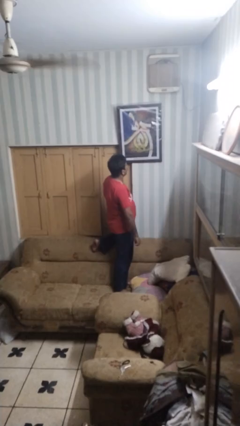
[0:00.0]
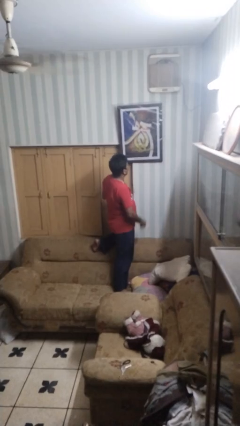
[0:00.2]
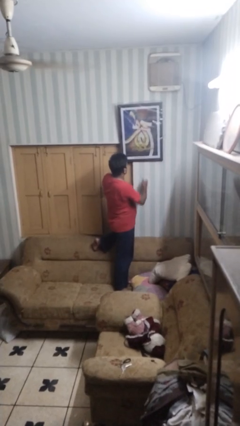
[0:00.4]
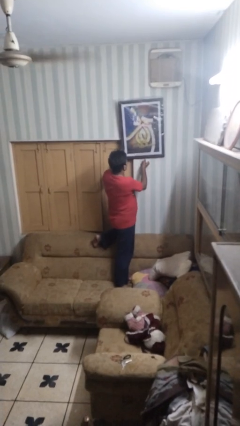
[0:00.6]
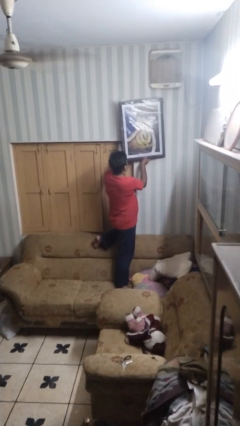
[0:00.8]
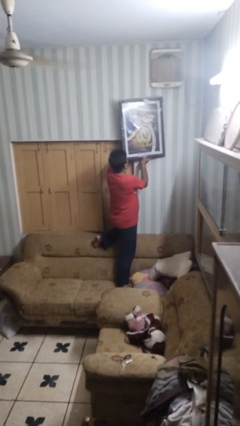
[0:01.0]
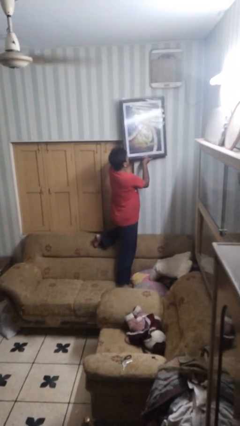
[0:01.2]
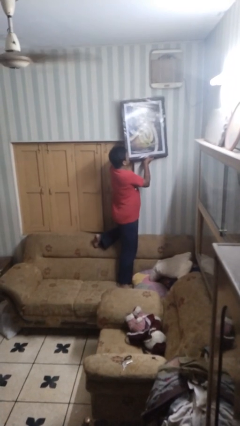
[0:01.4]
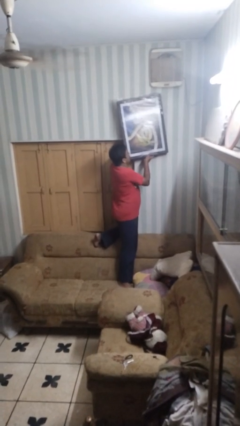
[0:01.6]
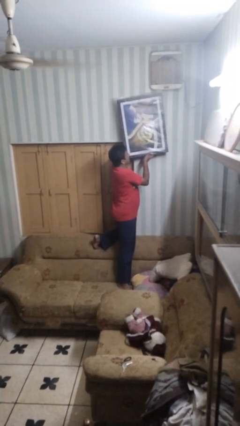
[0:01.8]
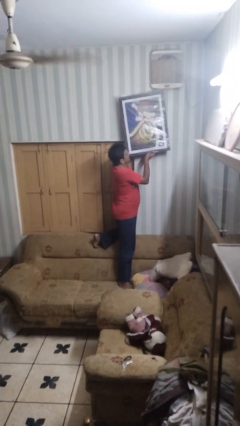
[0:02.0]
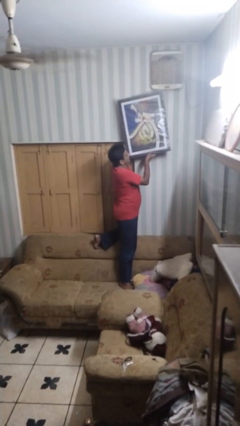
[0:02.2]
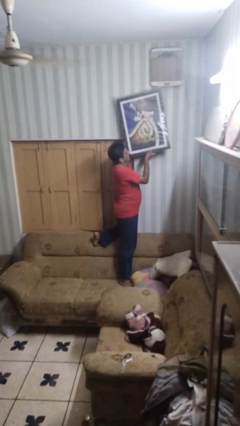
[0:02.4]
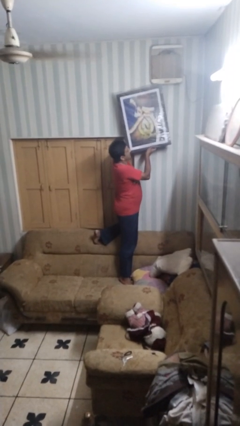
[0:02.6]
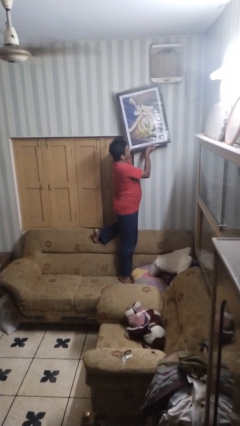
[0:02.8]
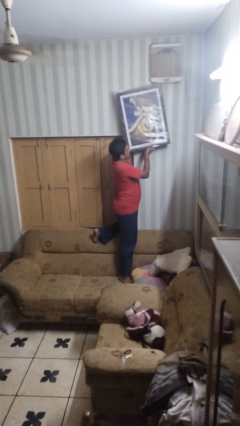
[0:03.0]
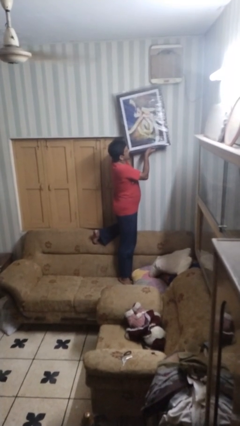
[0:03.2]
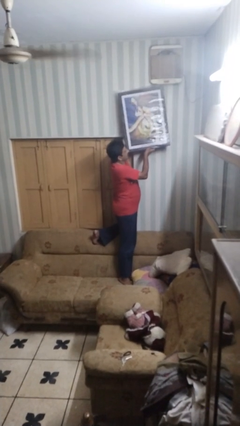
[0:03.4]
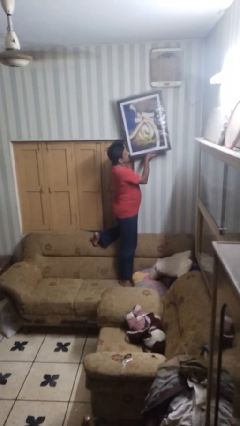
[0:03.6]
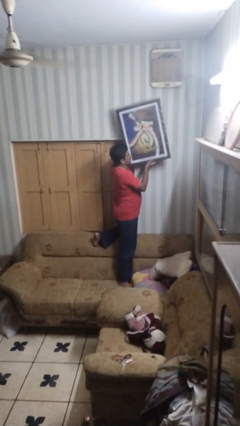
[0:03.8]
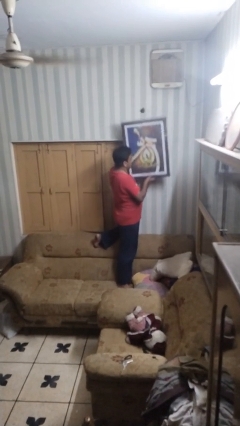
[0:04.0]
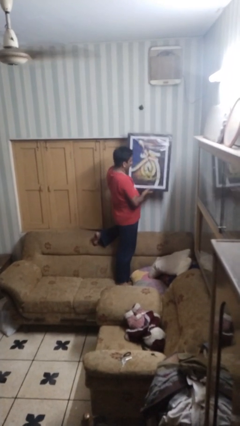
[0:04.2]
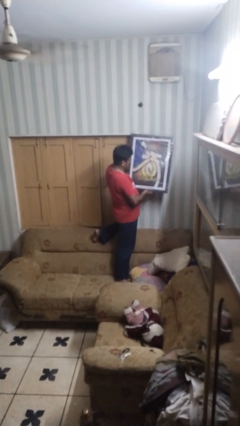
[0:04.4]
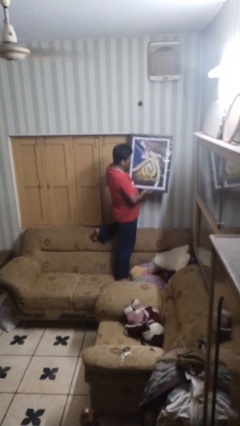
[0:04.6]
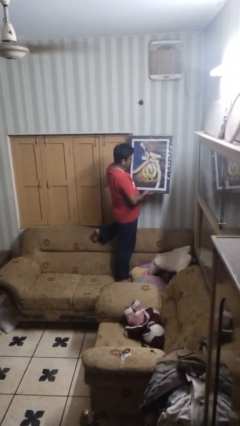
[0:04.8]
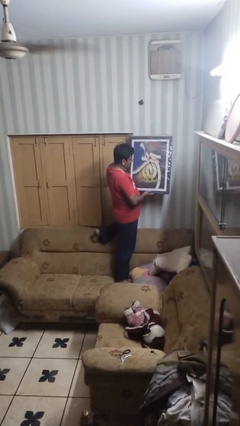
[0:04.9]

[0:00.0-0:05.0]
person takes down picture frame

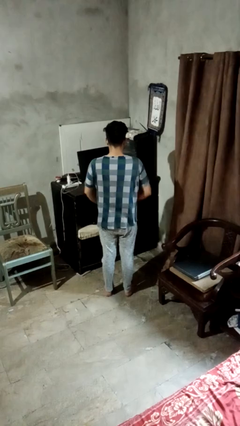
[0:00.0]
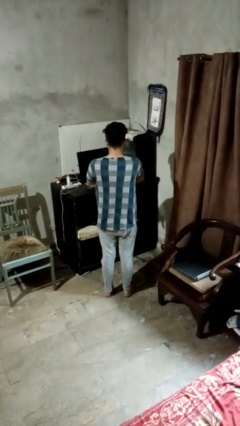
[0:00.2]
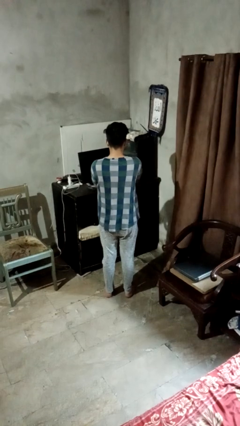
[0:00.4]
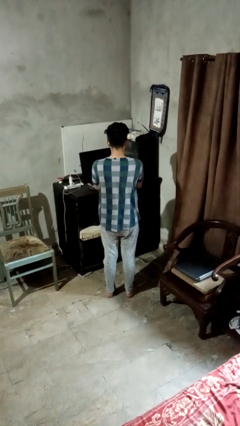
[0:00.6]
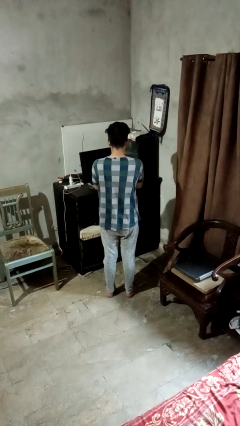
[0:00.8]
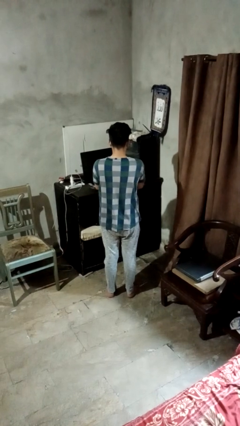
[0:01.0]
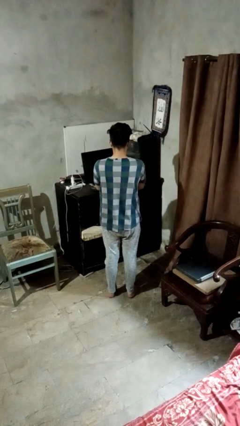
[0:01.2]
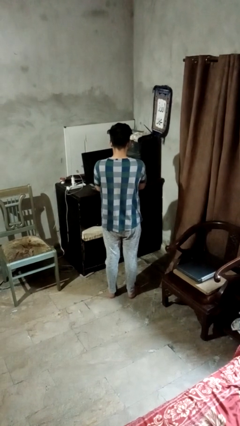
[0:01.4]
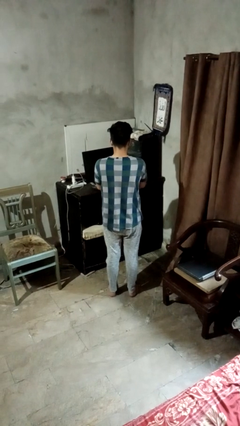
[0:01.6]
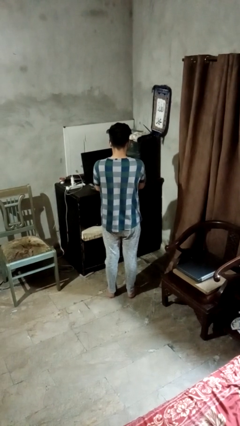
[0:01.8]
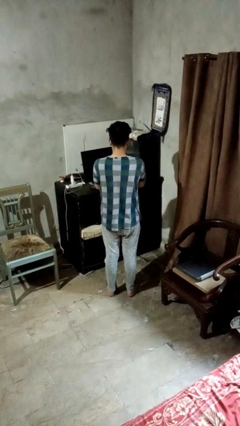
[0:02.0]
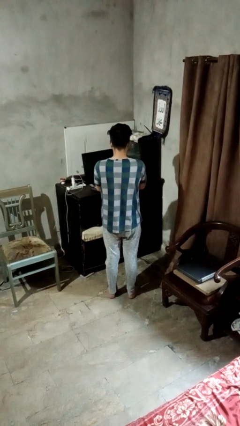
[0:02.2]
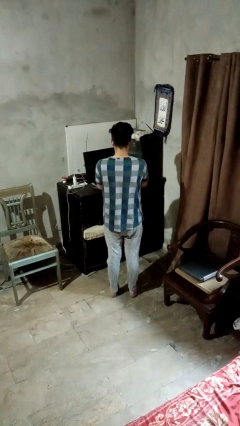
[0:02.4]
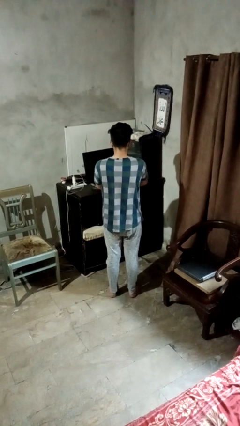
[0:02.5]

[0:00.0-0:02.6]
person crosses arms

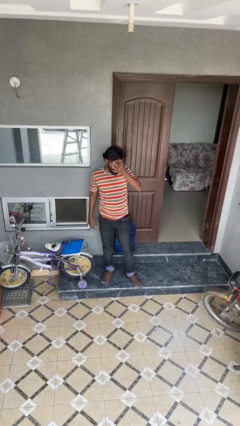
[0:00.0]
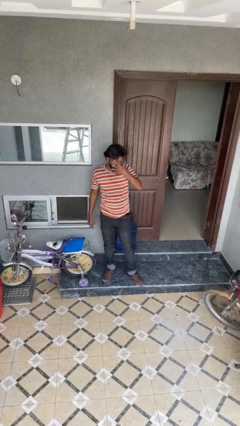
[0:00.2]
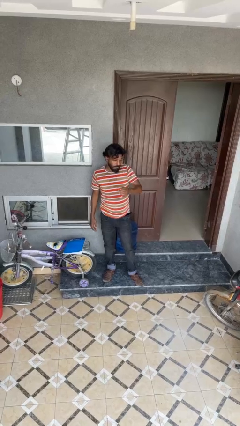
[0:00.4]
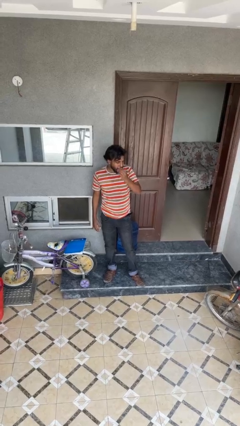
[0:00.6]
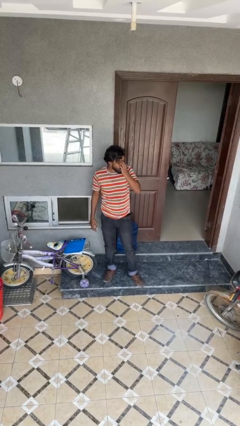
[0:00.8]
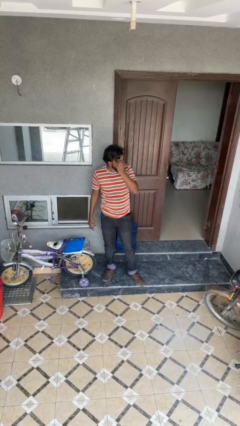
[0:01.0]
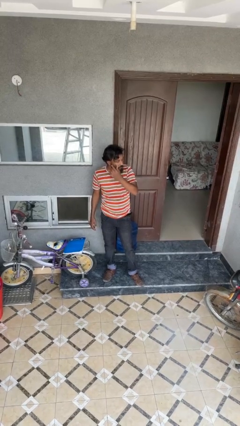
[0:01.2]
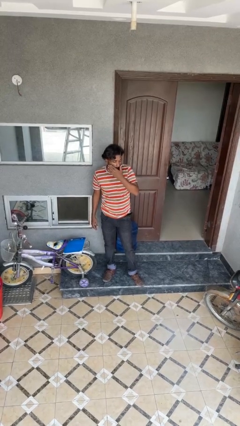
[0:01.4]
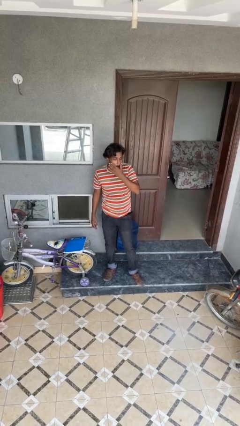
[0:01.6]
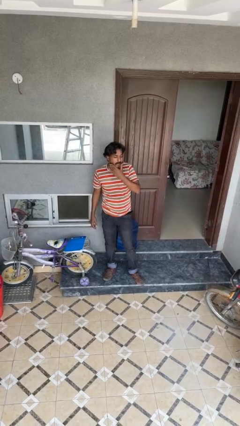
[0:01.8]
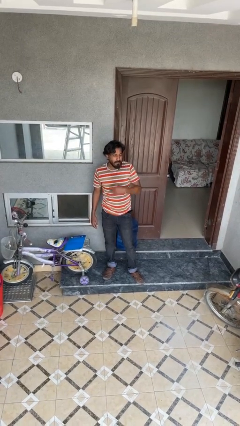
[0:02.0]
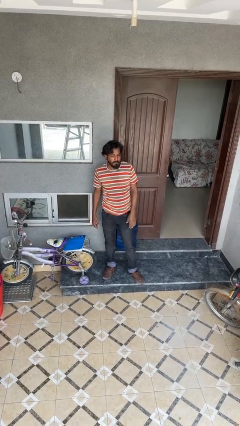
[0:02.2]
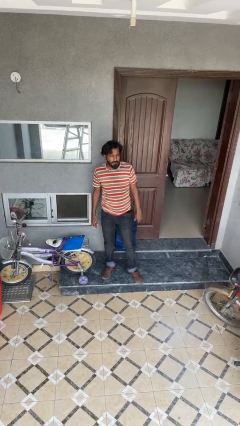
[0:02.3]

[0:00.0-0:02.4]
person scratches face

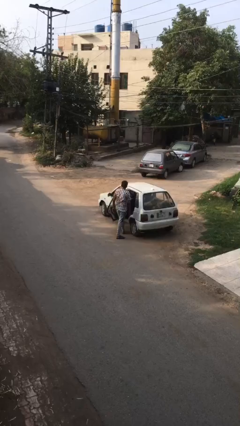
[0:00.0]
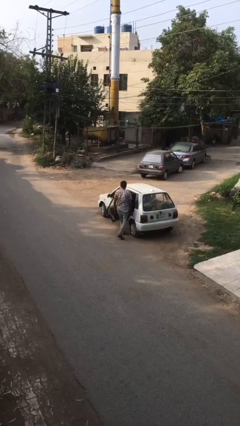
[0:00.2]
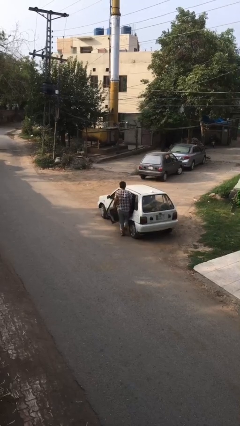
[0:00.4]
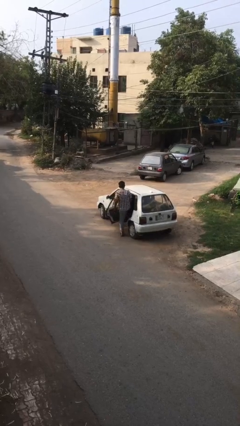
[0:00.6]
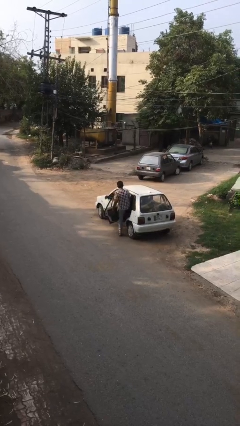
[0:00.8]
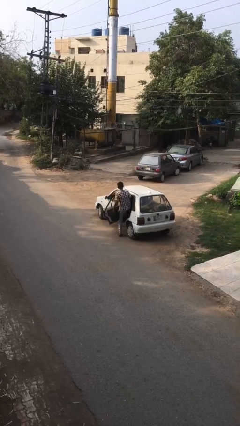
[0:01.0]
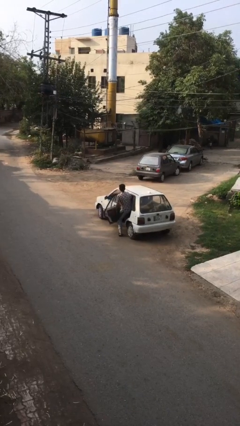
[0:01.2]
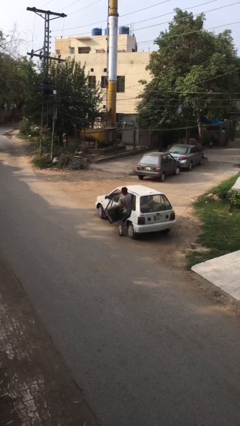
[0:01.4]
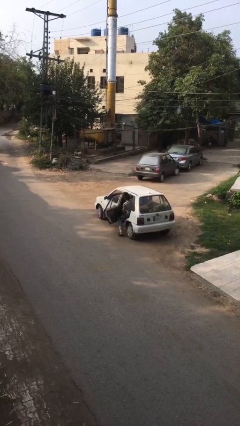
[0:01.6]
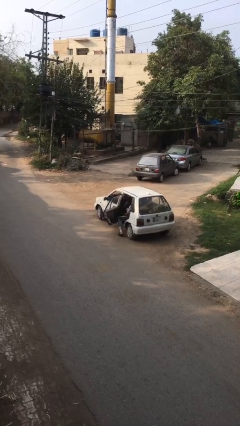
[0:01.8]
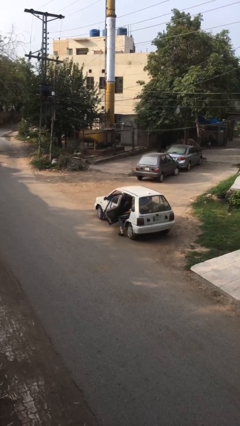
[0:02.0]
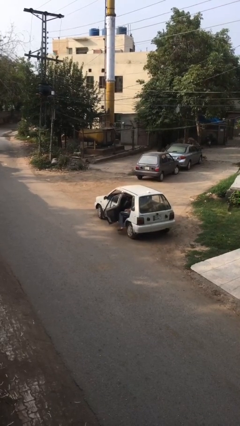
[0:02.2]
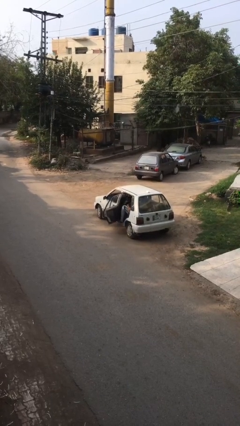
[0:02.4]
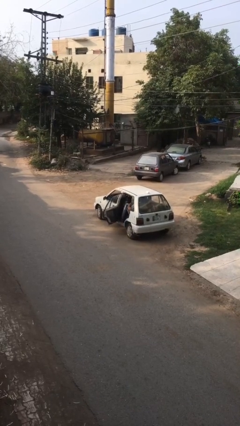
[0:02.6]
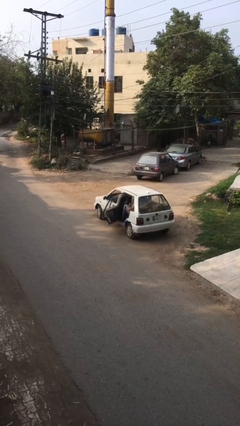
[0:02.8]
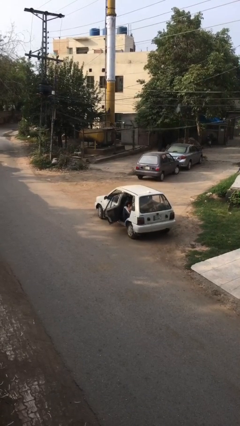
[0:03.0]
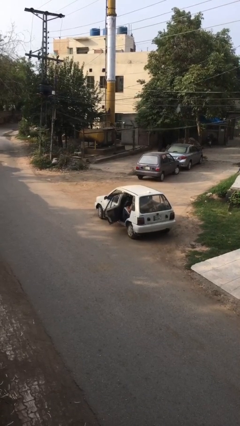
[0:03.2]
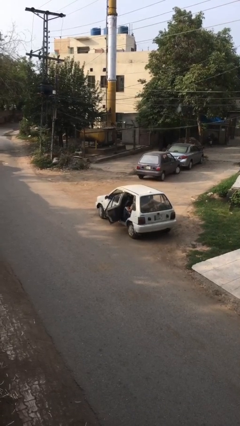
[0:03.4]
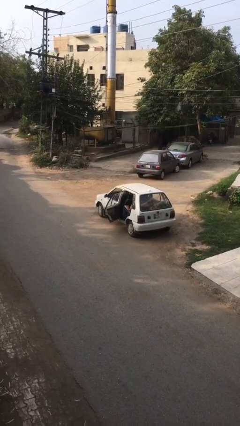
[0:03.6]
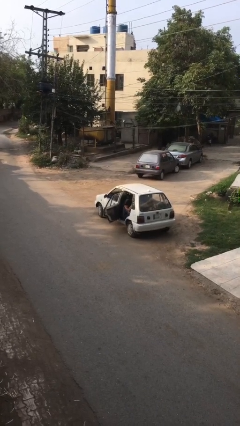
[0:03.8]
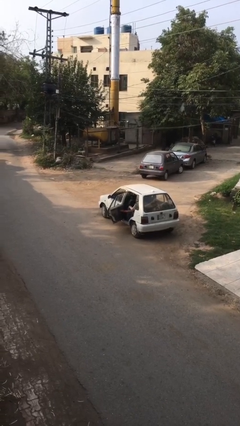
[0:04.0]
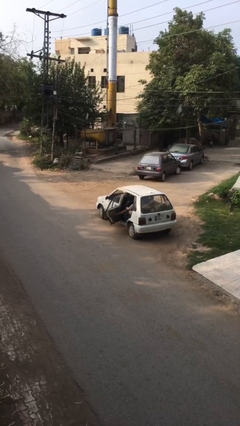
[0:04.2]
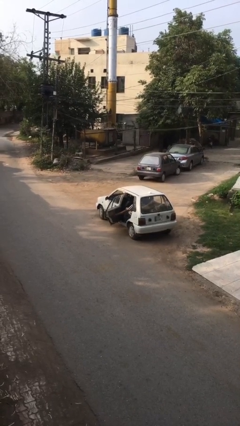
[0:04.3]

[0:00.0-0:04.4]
person enters car

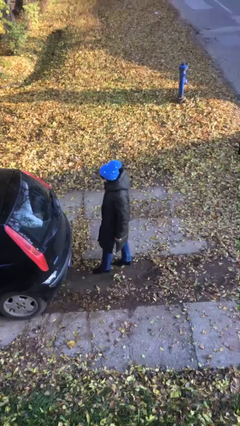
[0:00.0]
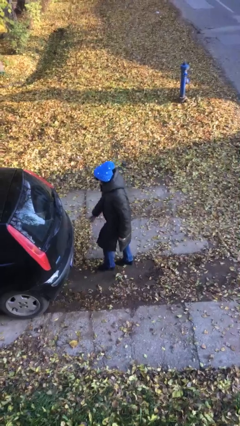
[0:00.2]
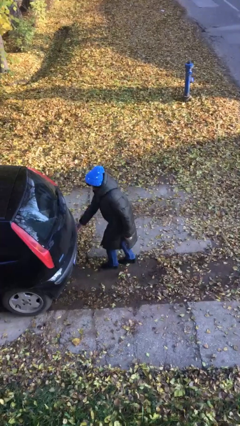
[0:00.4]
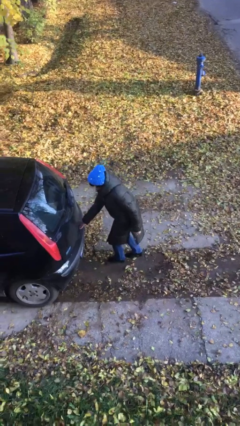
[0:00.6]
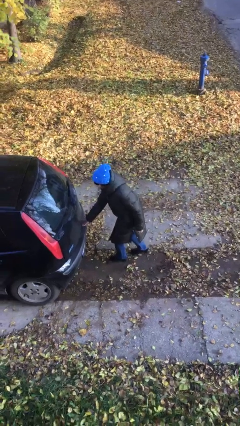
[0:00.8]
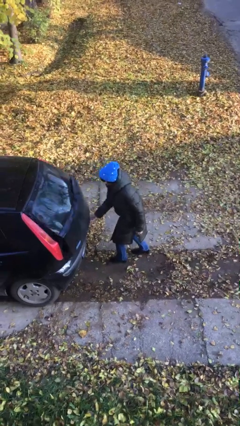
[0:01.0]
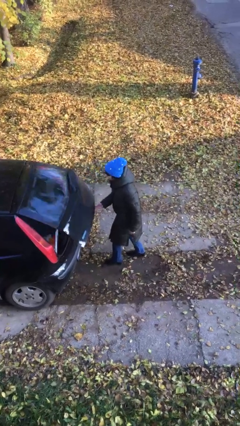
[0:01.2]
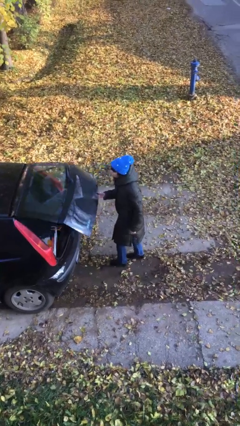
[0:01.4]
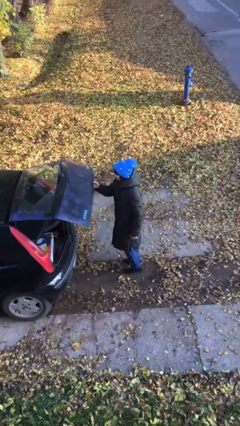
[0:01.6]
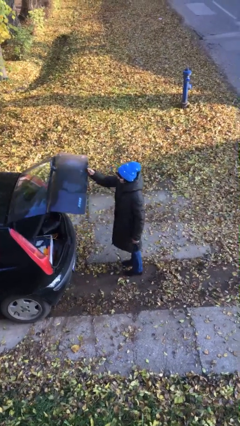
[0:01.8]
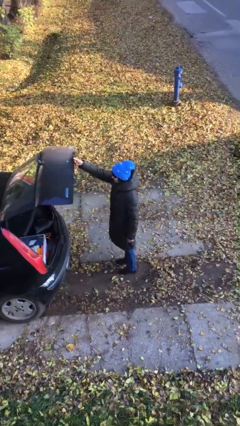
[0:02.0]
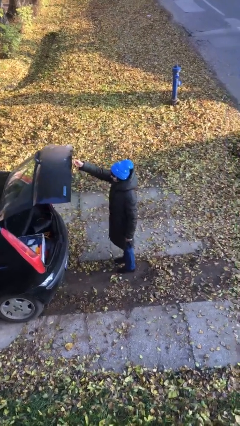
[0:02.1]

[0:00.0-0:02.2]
person opens car trunk

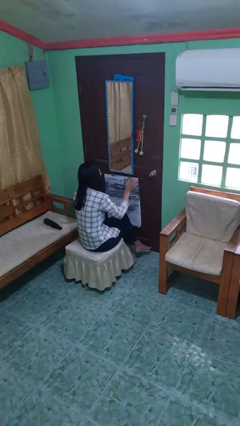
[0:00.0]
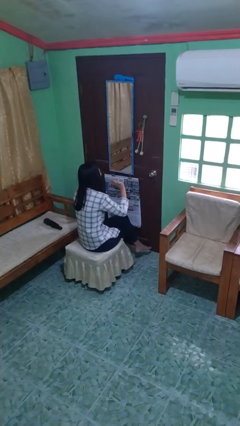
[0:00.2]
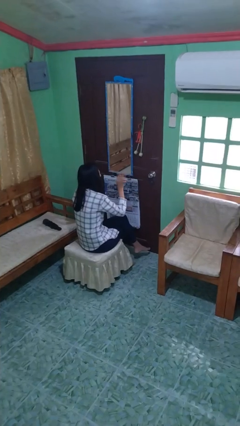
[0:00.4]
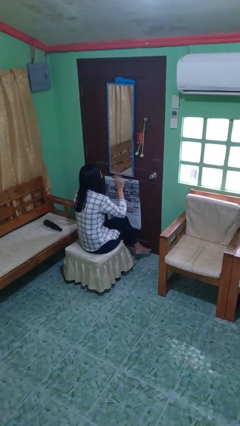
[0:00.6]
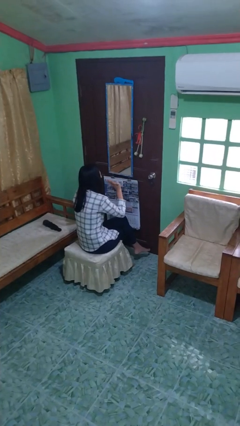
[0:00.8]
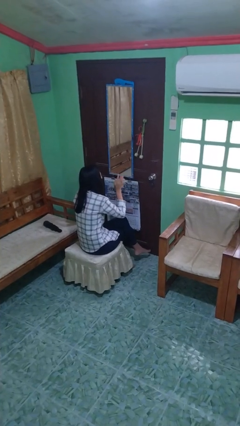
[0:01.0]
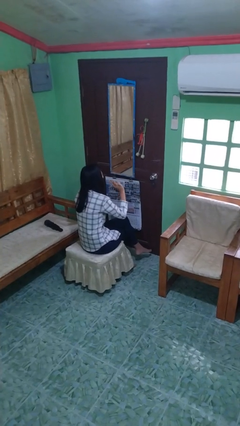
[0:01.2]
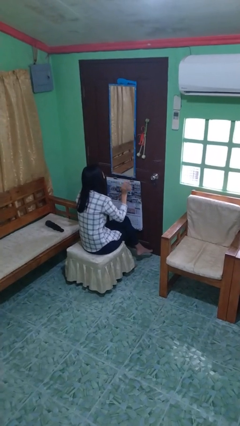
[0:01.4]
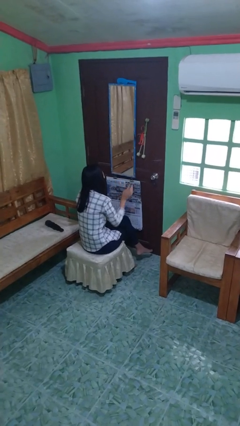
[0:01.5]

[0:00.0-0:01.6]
person waves hand over object
